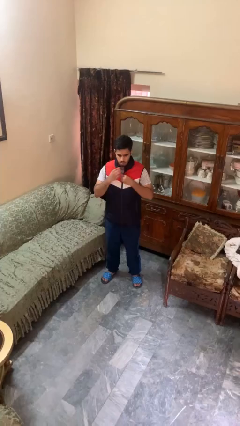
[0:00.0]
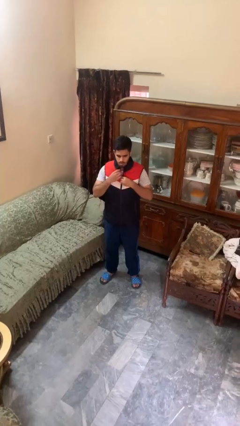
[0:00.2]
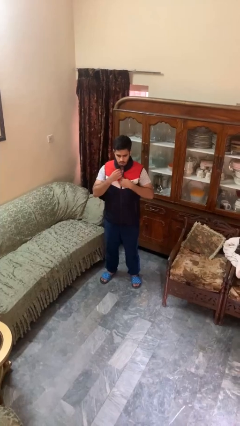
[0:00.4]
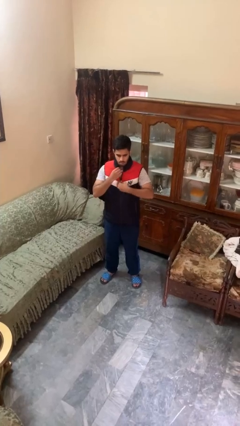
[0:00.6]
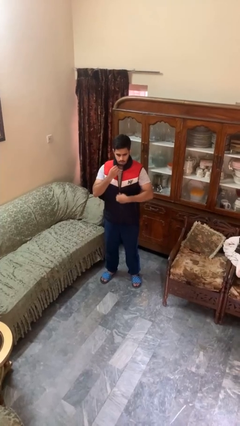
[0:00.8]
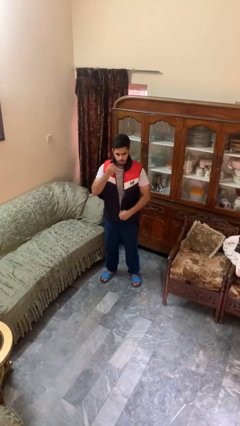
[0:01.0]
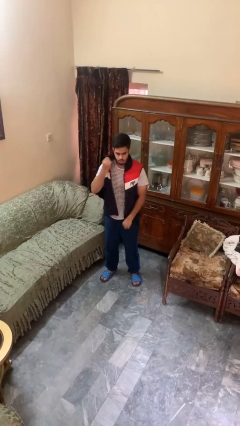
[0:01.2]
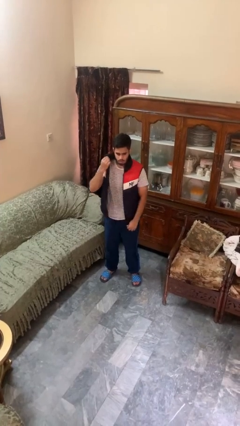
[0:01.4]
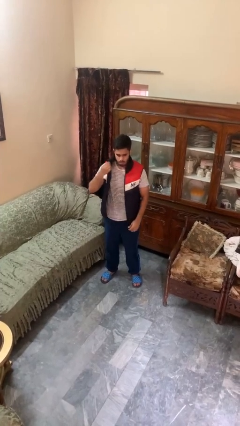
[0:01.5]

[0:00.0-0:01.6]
person unzips jacket

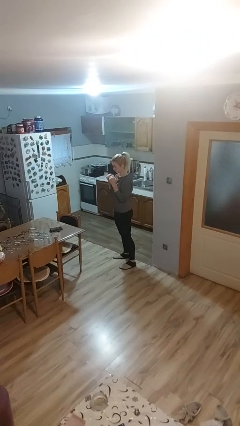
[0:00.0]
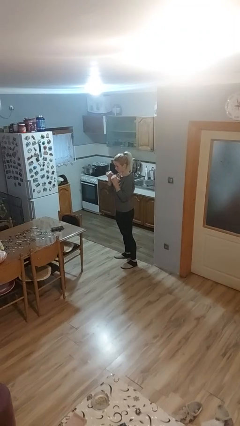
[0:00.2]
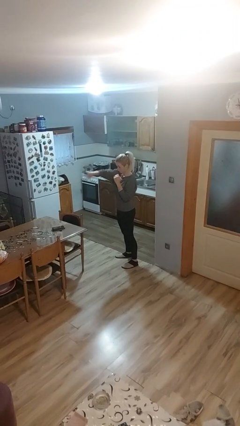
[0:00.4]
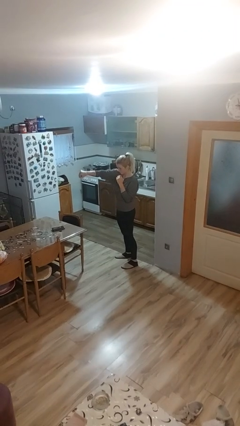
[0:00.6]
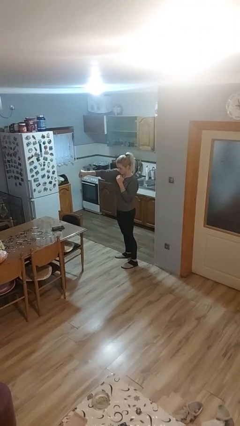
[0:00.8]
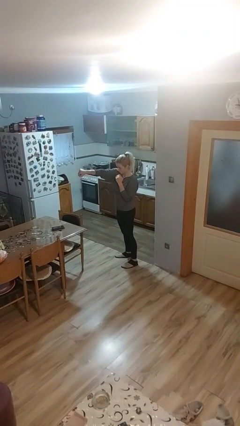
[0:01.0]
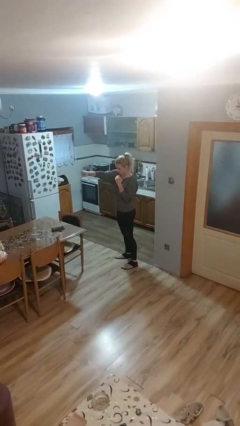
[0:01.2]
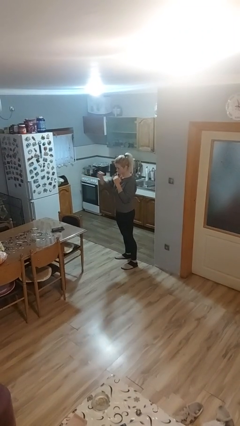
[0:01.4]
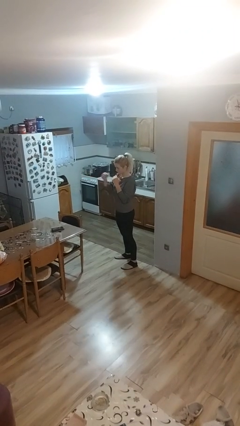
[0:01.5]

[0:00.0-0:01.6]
person punches

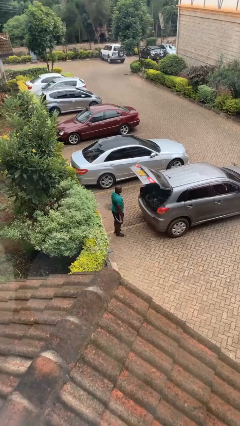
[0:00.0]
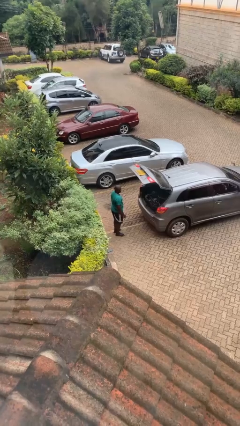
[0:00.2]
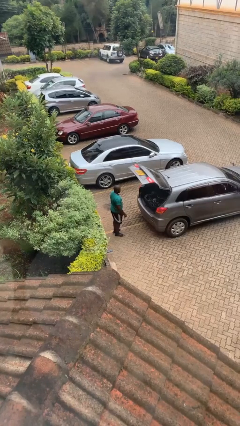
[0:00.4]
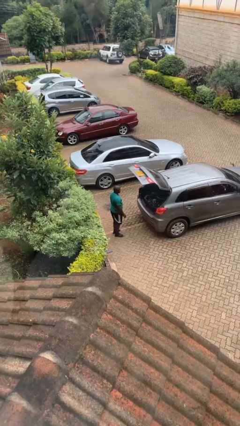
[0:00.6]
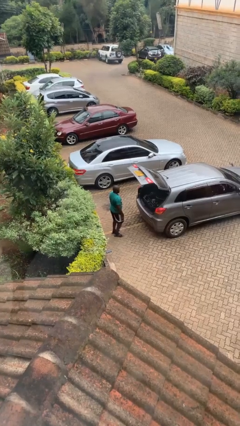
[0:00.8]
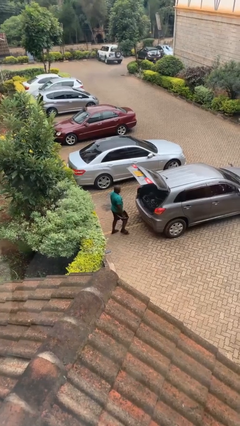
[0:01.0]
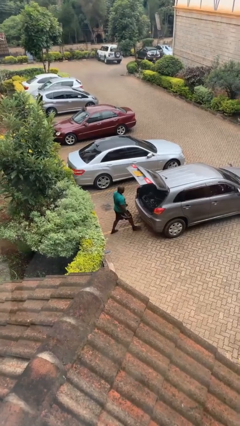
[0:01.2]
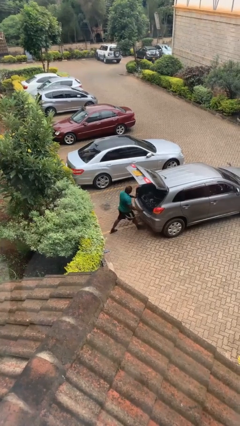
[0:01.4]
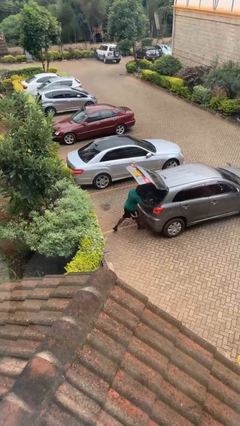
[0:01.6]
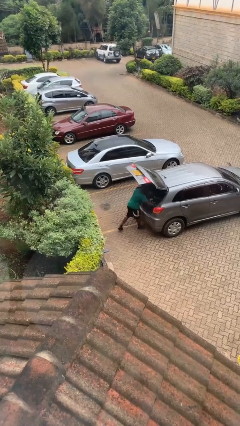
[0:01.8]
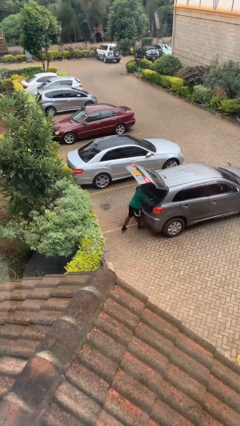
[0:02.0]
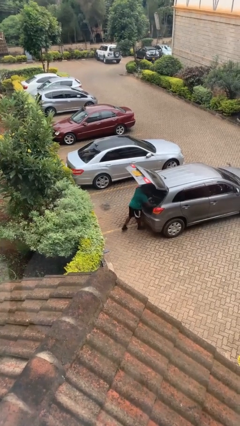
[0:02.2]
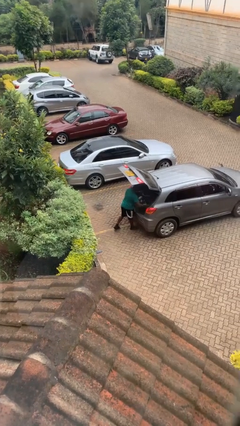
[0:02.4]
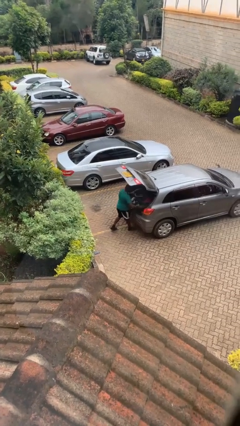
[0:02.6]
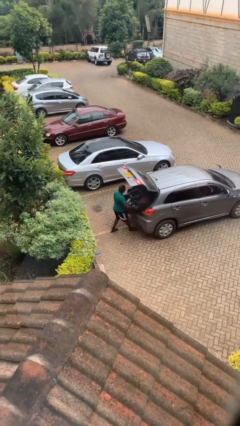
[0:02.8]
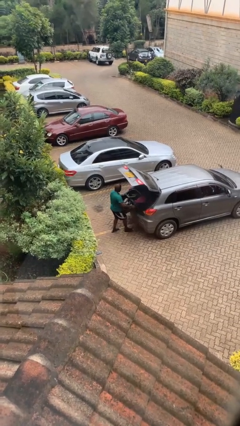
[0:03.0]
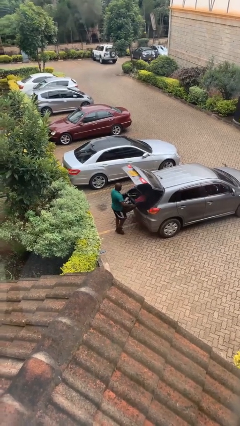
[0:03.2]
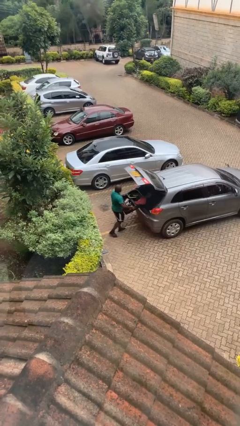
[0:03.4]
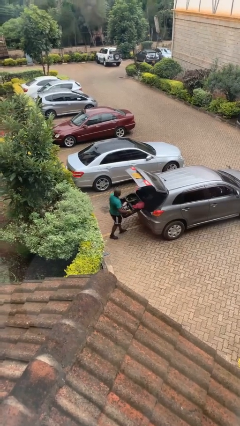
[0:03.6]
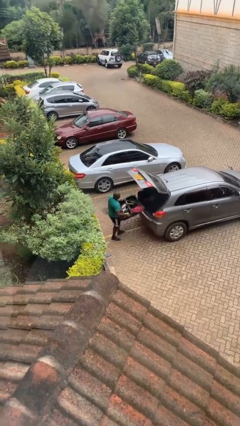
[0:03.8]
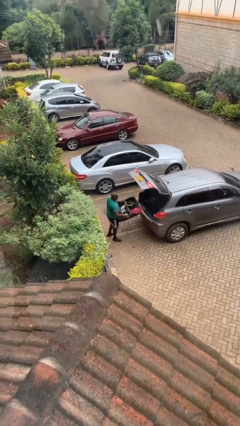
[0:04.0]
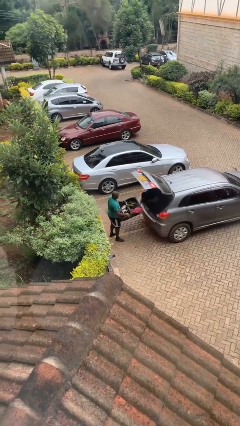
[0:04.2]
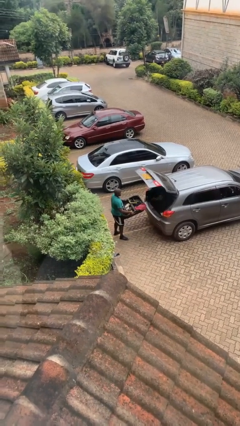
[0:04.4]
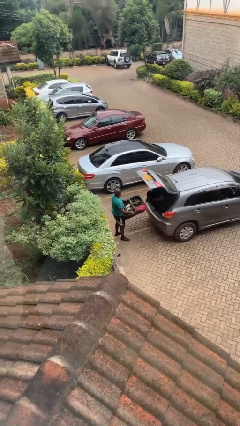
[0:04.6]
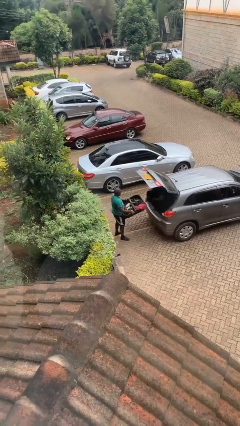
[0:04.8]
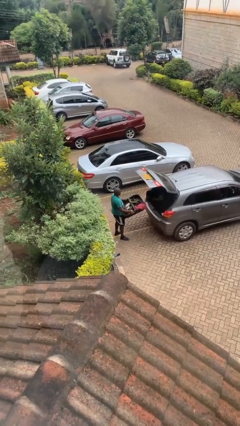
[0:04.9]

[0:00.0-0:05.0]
person unloads car

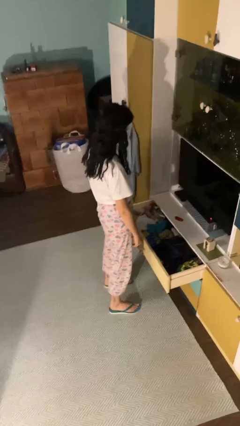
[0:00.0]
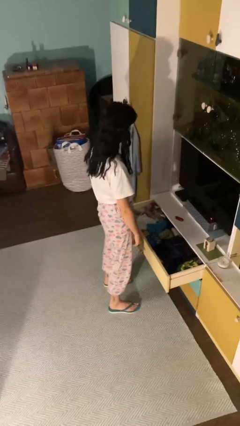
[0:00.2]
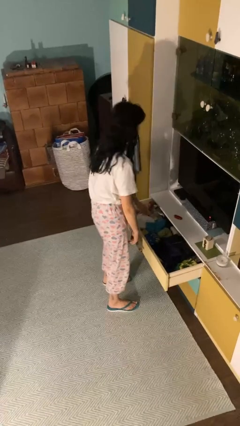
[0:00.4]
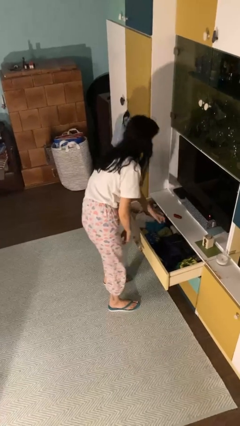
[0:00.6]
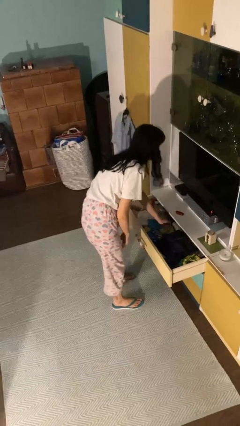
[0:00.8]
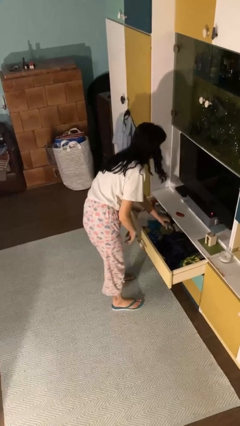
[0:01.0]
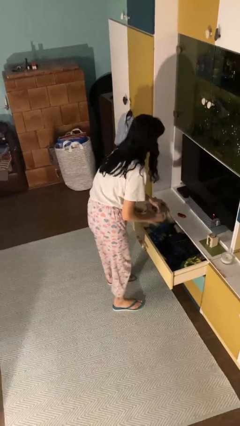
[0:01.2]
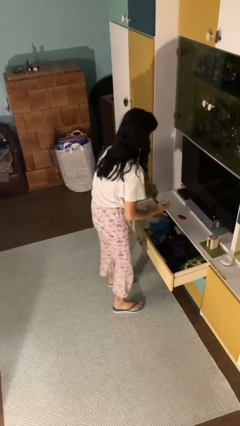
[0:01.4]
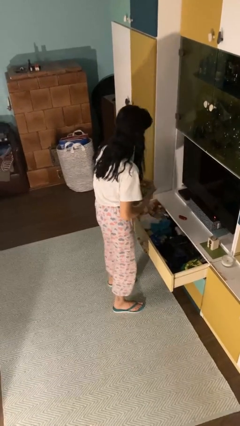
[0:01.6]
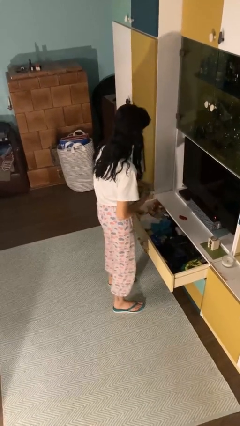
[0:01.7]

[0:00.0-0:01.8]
person takes clothes from dresser

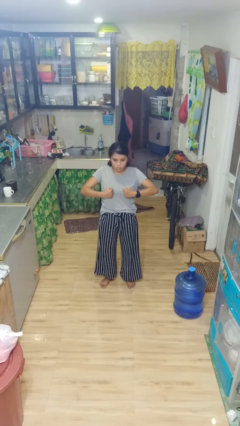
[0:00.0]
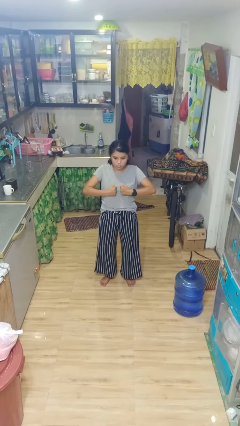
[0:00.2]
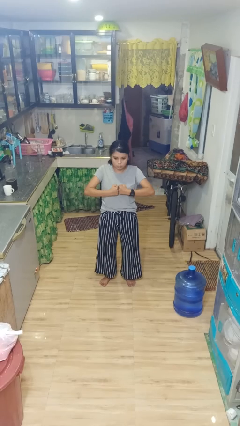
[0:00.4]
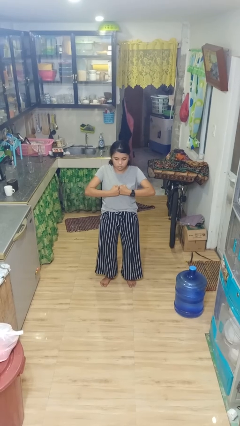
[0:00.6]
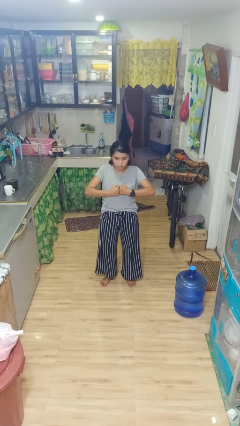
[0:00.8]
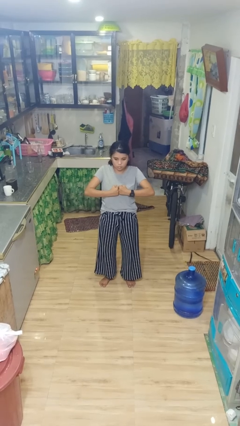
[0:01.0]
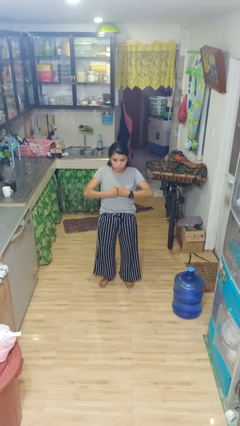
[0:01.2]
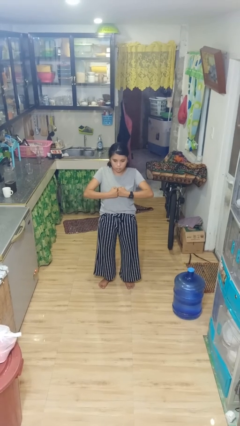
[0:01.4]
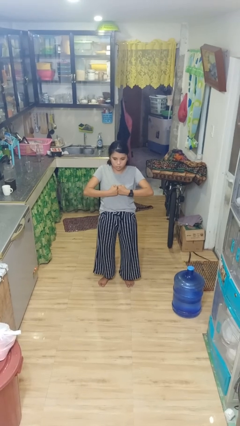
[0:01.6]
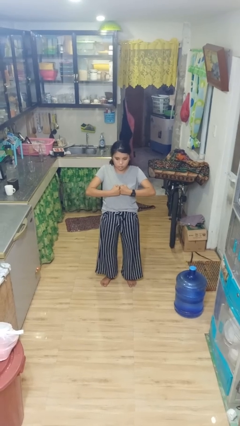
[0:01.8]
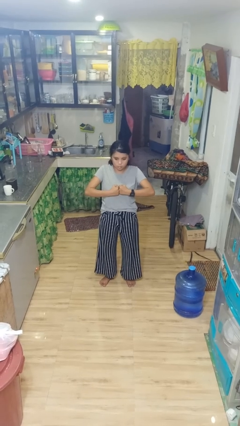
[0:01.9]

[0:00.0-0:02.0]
person gestures zoom out

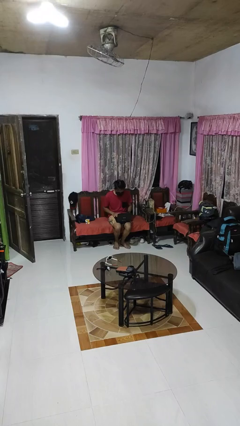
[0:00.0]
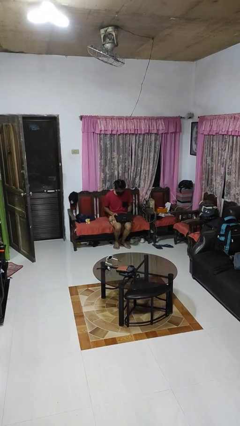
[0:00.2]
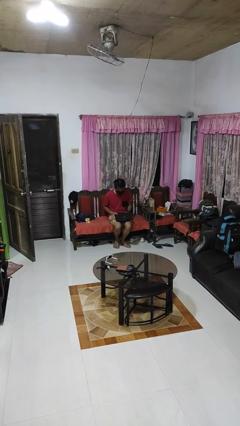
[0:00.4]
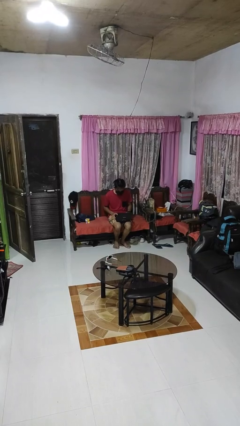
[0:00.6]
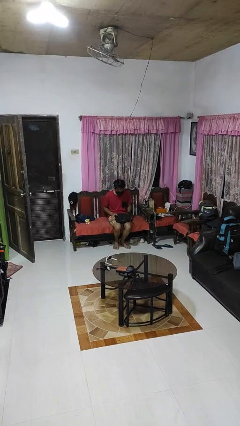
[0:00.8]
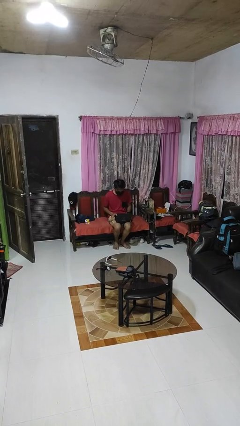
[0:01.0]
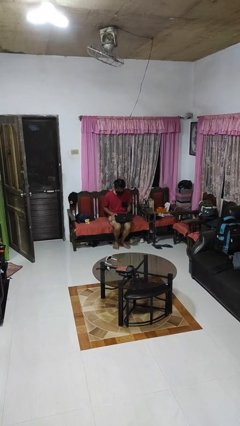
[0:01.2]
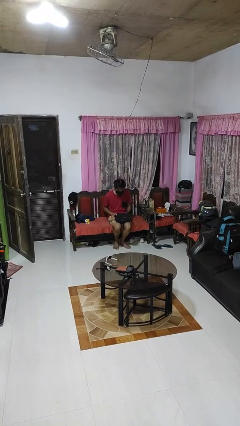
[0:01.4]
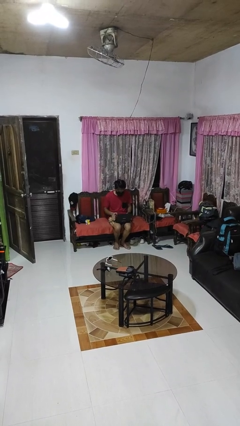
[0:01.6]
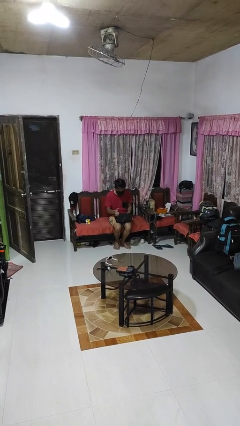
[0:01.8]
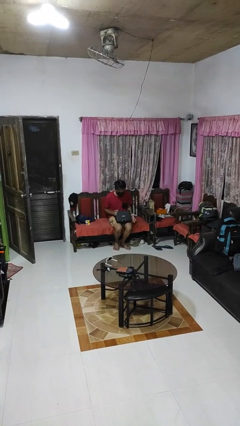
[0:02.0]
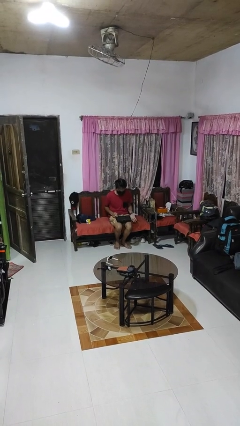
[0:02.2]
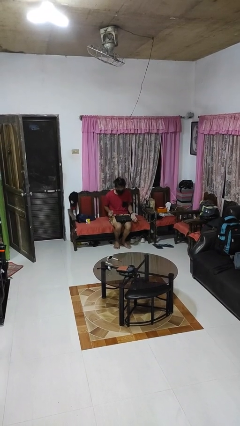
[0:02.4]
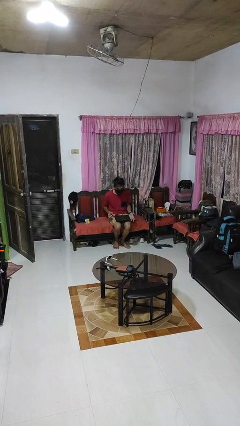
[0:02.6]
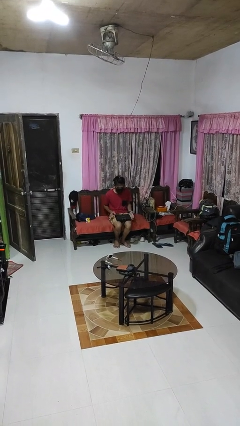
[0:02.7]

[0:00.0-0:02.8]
person closes laptop

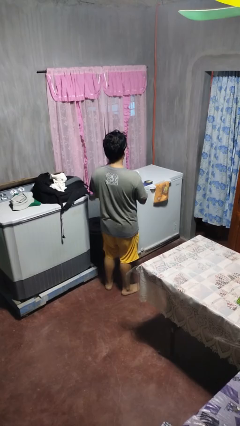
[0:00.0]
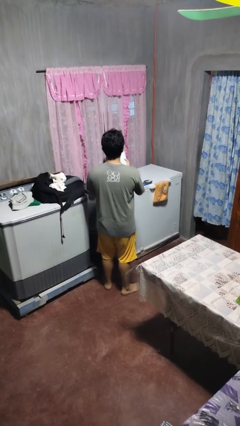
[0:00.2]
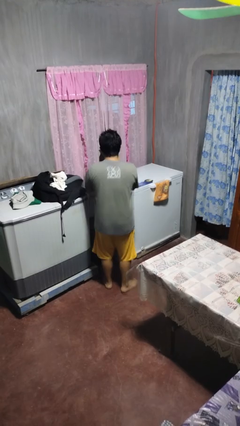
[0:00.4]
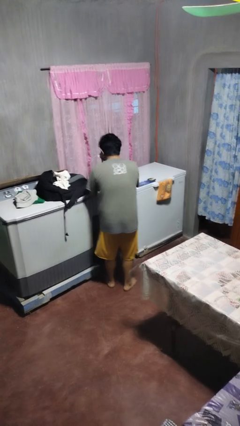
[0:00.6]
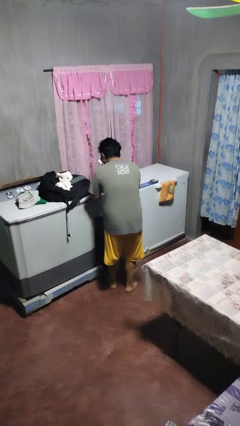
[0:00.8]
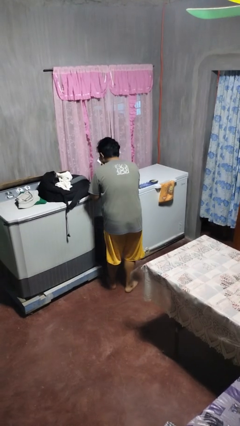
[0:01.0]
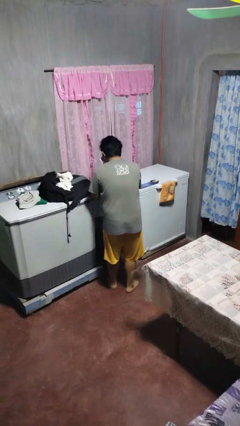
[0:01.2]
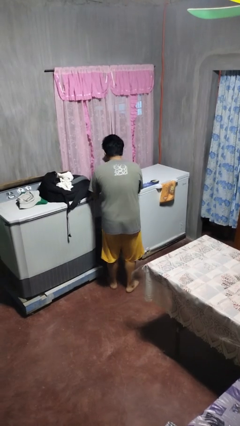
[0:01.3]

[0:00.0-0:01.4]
person blows nose

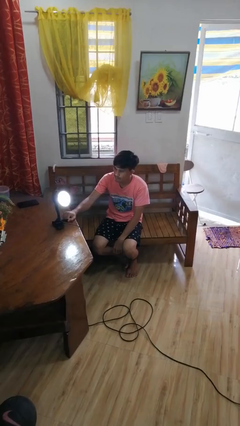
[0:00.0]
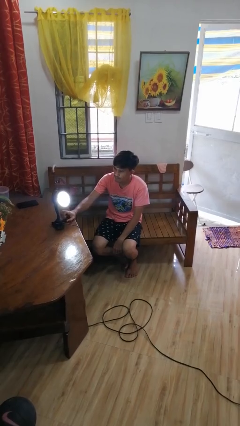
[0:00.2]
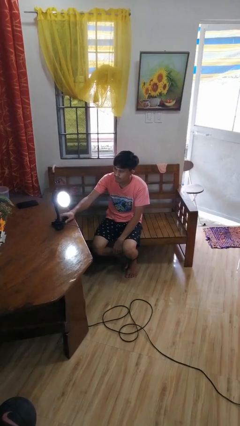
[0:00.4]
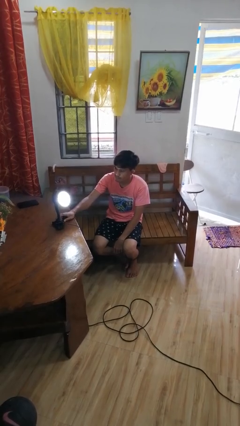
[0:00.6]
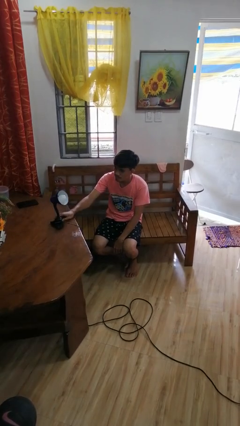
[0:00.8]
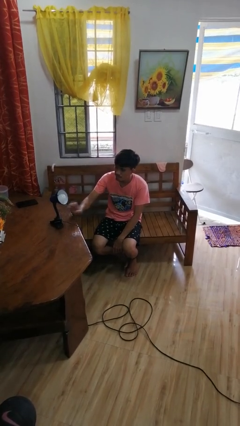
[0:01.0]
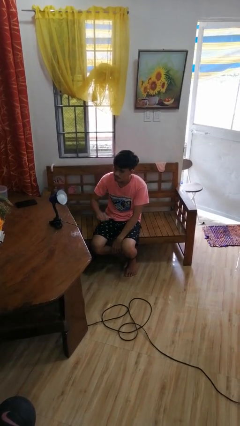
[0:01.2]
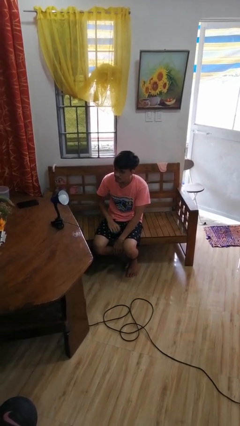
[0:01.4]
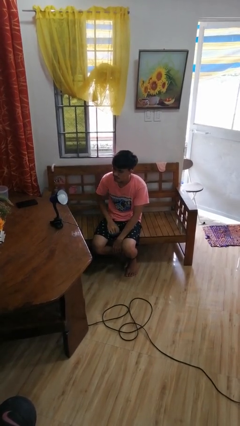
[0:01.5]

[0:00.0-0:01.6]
person turns off lamp
